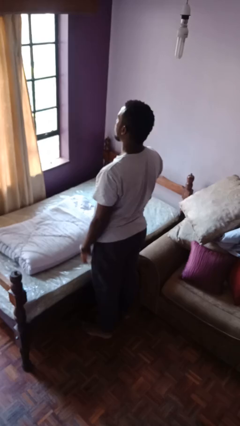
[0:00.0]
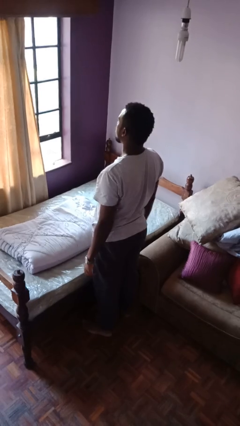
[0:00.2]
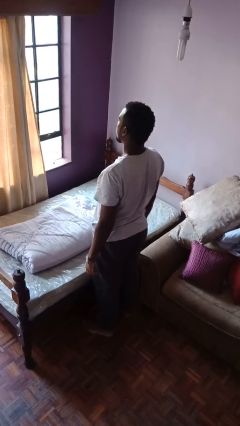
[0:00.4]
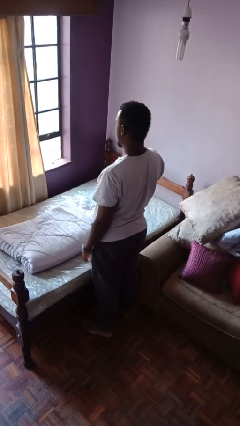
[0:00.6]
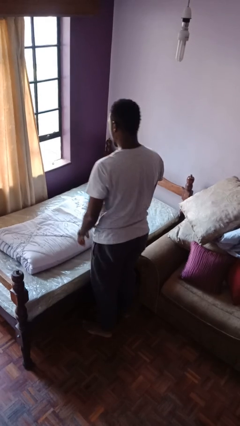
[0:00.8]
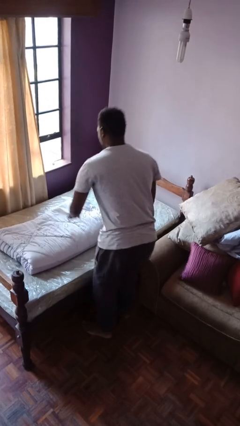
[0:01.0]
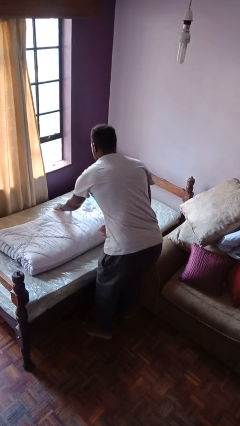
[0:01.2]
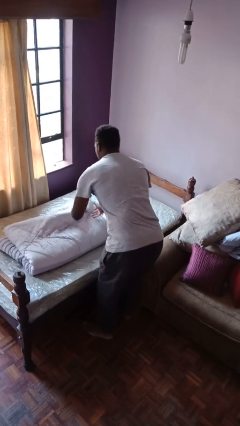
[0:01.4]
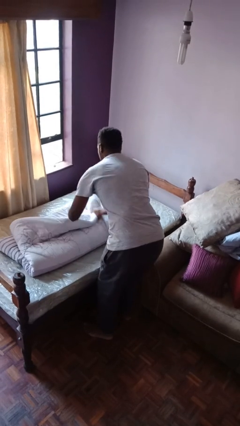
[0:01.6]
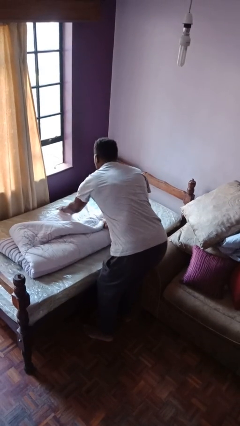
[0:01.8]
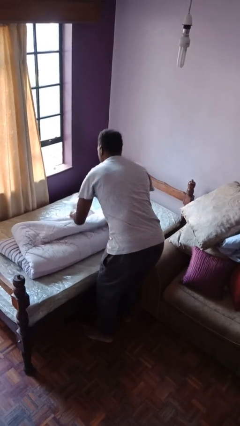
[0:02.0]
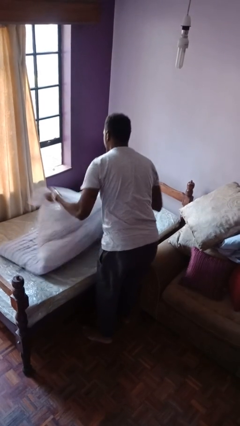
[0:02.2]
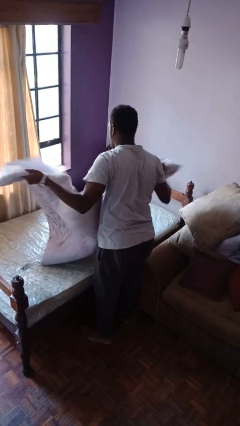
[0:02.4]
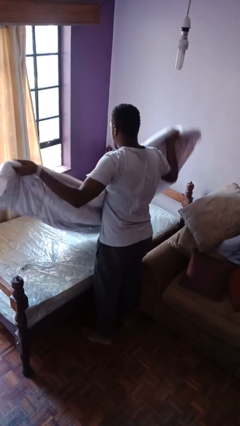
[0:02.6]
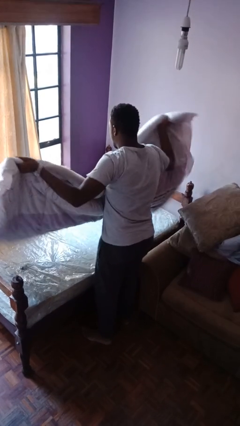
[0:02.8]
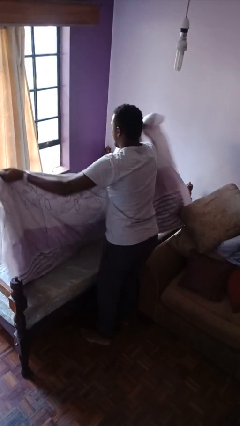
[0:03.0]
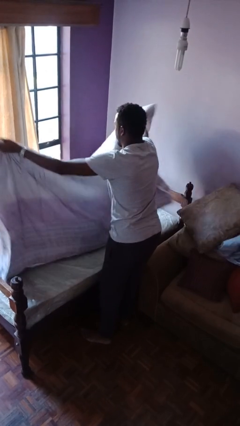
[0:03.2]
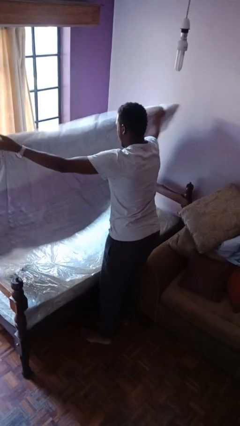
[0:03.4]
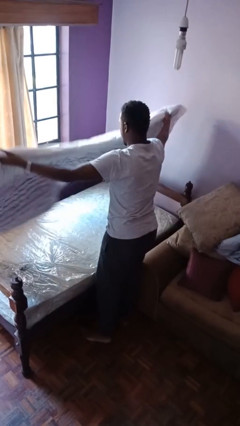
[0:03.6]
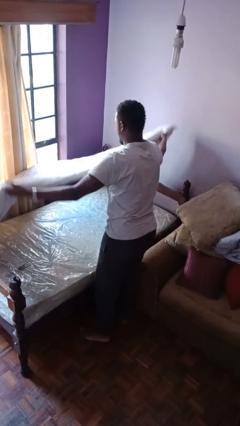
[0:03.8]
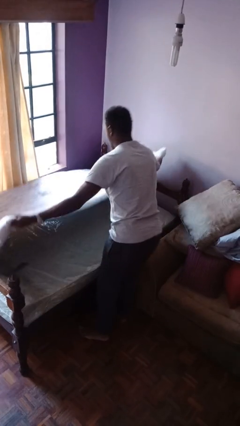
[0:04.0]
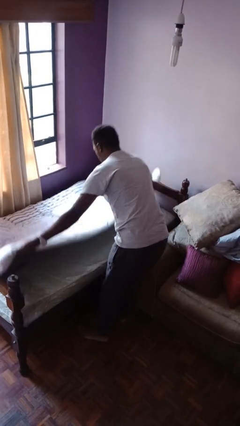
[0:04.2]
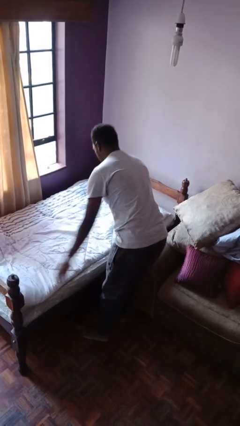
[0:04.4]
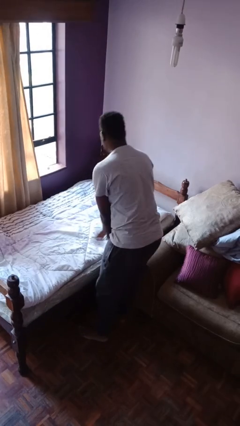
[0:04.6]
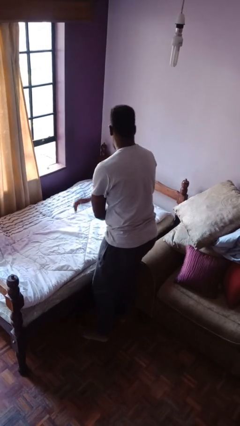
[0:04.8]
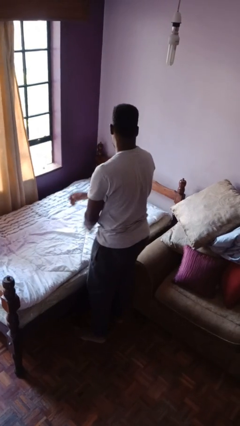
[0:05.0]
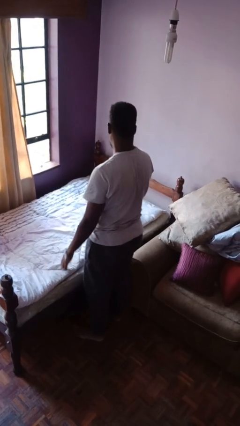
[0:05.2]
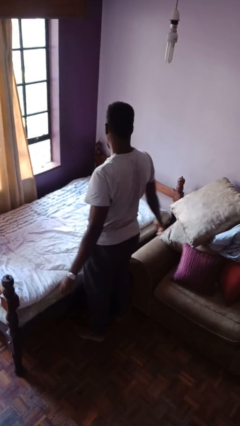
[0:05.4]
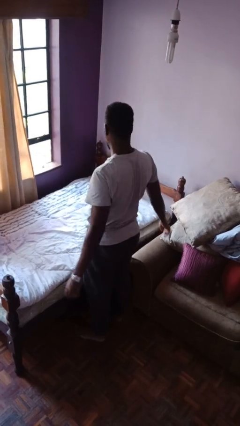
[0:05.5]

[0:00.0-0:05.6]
person unfolds blanket

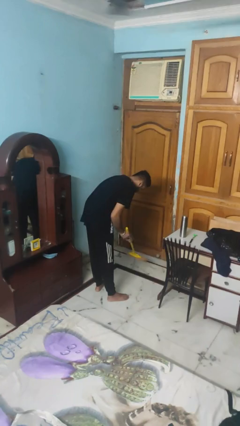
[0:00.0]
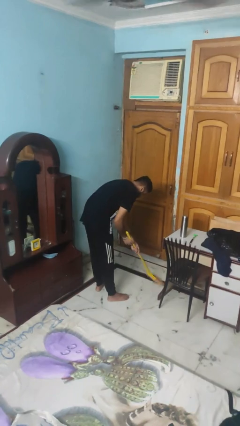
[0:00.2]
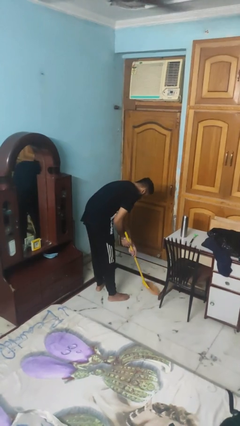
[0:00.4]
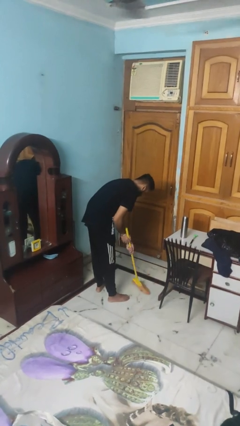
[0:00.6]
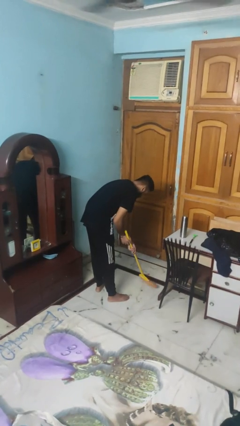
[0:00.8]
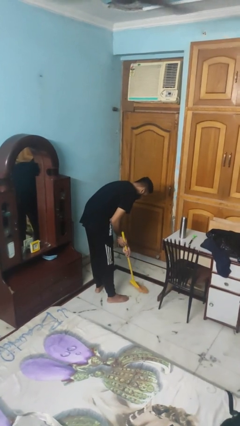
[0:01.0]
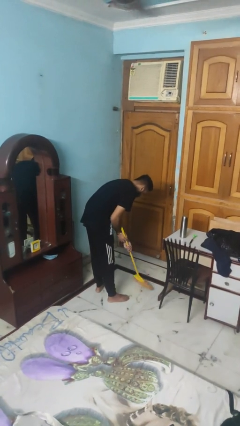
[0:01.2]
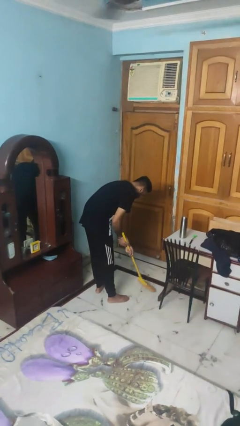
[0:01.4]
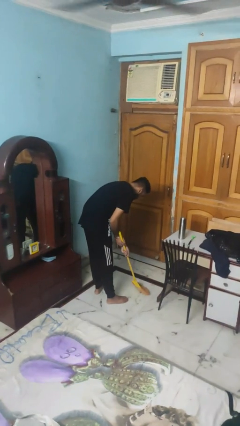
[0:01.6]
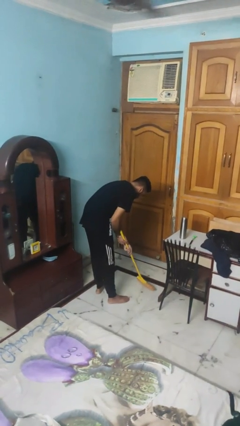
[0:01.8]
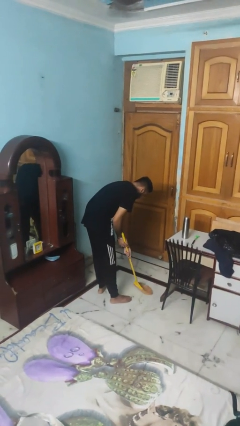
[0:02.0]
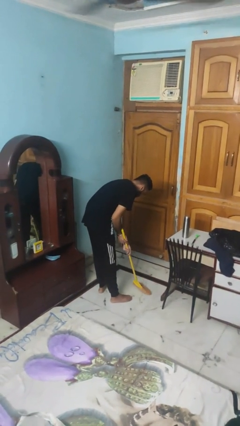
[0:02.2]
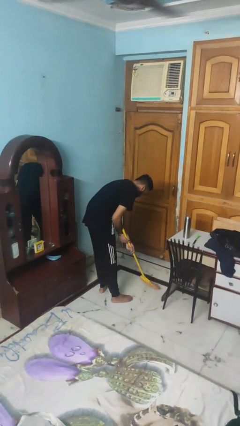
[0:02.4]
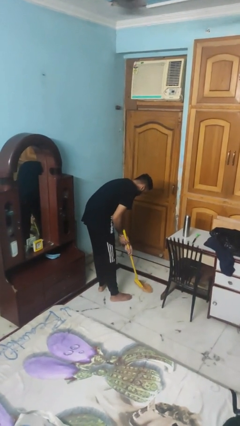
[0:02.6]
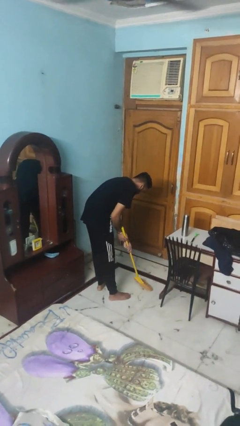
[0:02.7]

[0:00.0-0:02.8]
person sweeps floor

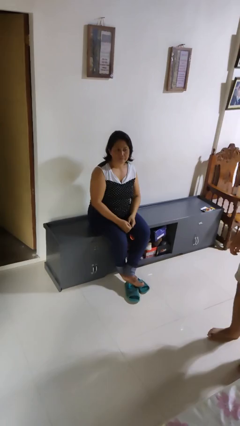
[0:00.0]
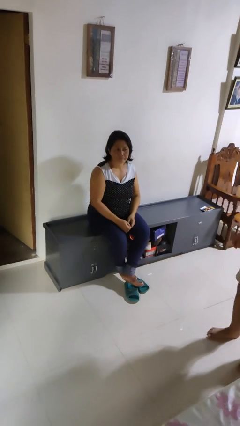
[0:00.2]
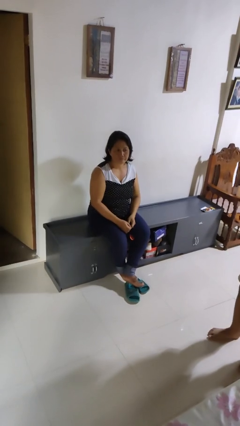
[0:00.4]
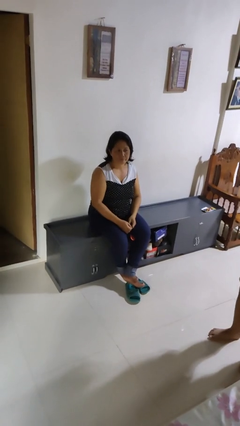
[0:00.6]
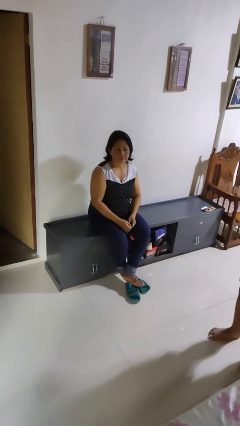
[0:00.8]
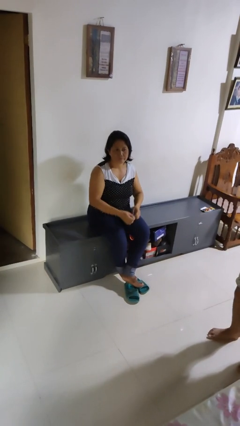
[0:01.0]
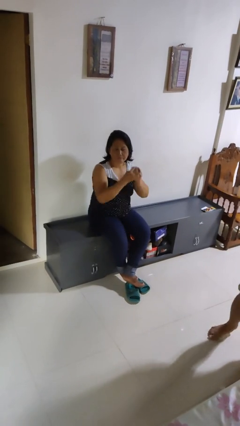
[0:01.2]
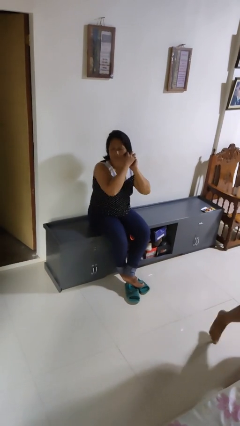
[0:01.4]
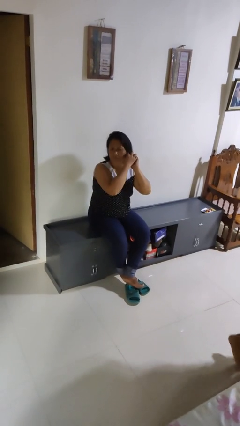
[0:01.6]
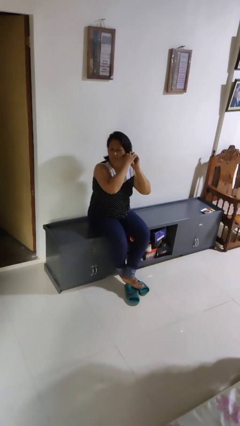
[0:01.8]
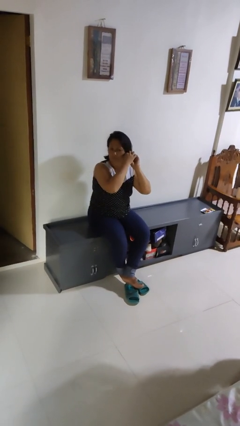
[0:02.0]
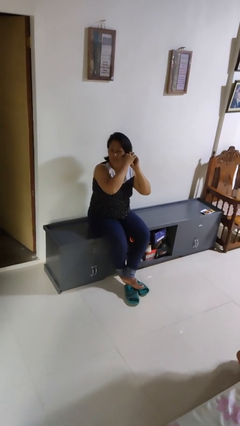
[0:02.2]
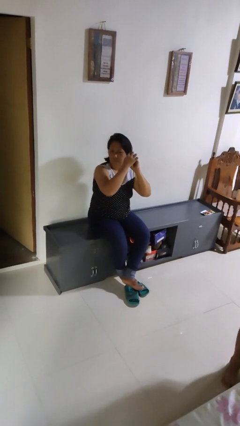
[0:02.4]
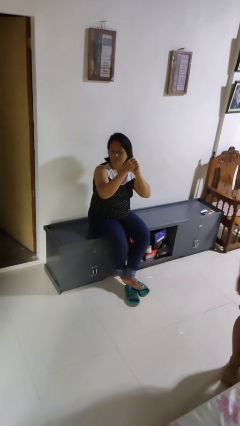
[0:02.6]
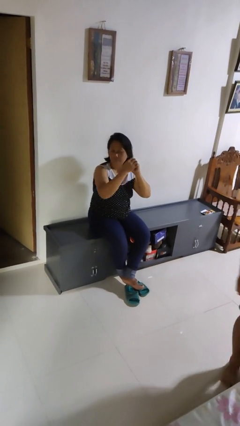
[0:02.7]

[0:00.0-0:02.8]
person takes off earrings

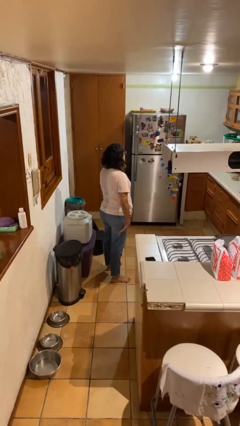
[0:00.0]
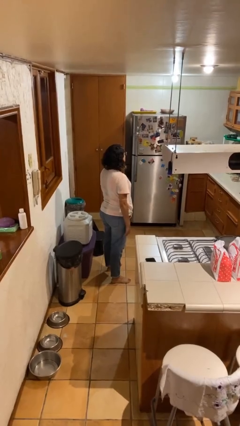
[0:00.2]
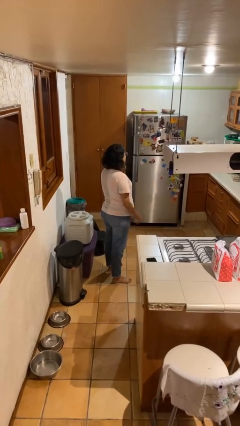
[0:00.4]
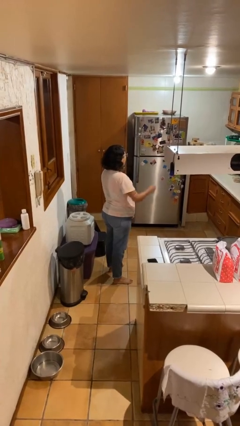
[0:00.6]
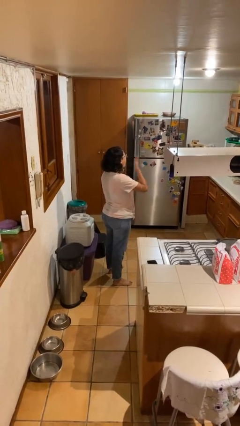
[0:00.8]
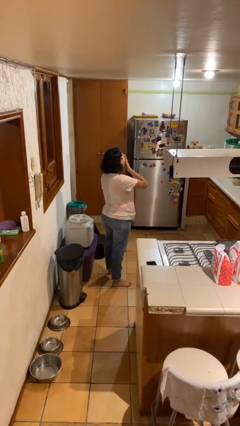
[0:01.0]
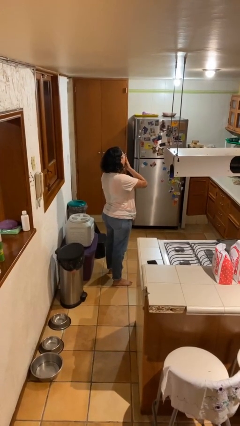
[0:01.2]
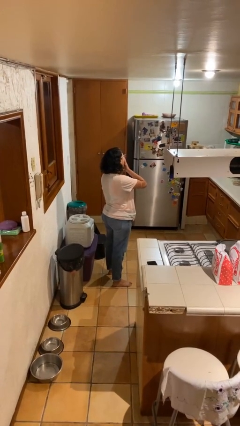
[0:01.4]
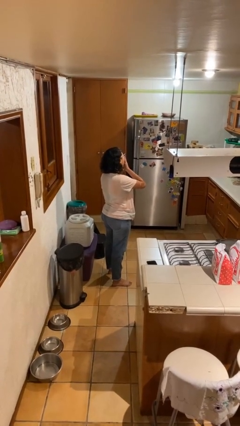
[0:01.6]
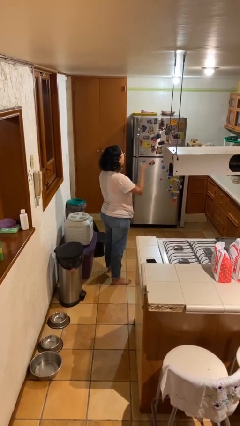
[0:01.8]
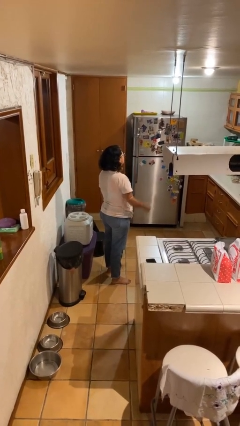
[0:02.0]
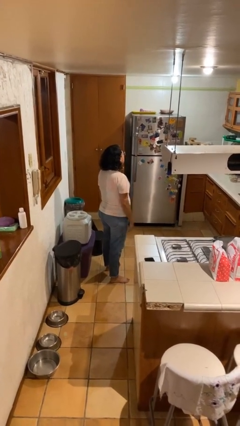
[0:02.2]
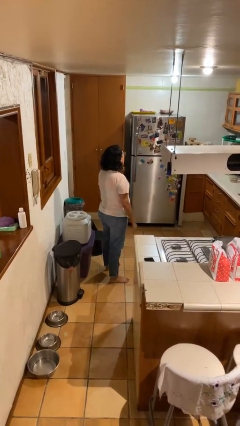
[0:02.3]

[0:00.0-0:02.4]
person yawns

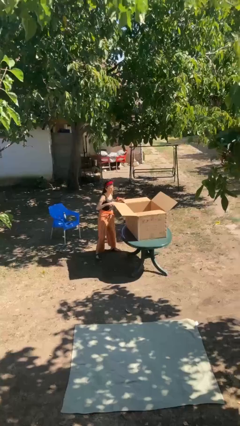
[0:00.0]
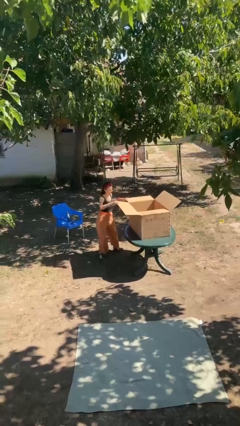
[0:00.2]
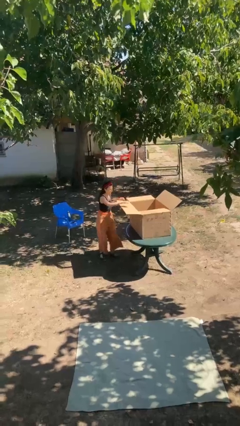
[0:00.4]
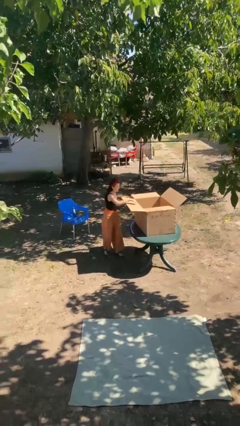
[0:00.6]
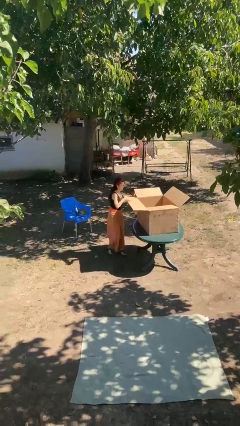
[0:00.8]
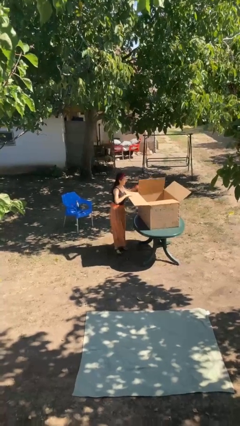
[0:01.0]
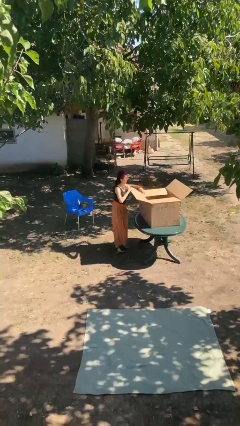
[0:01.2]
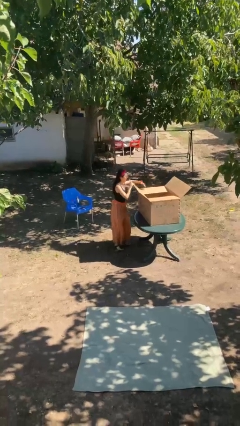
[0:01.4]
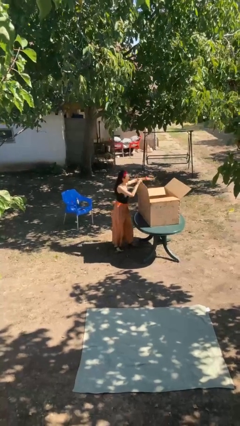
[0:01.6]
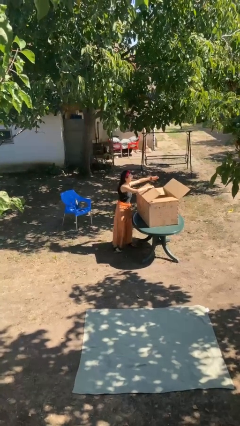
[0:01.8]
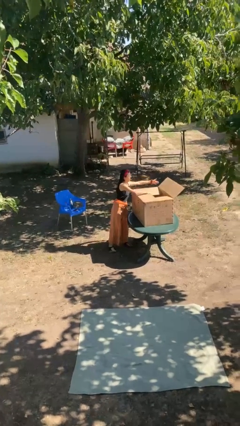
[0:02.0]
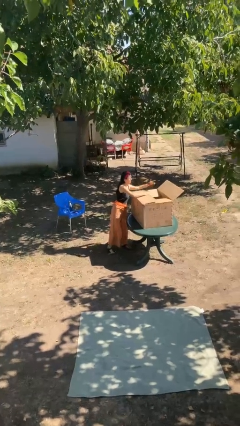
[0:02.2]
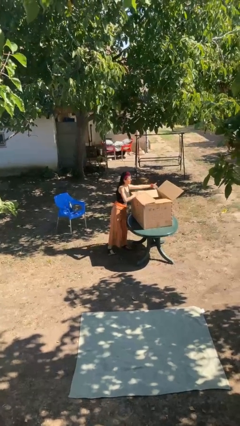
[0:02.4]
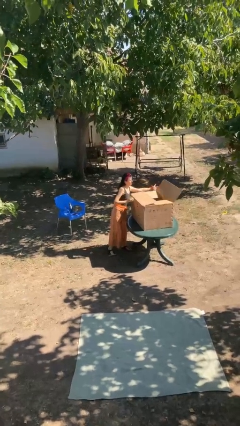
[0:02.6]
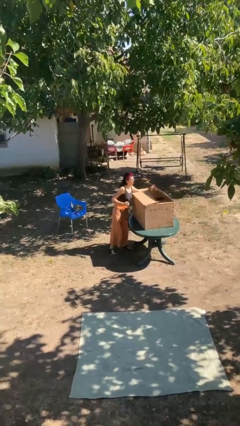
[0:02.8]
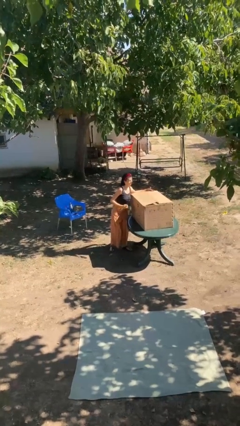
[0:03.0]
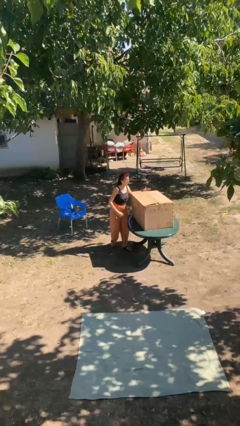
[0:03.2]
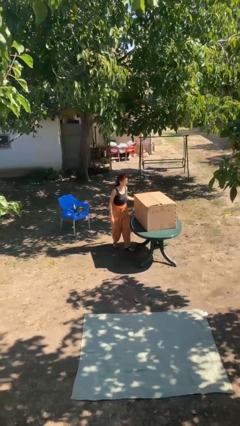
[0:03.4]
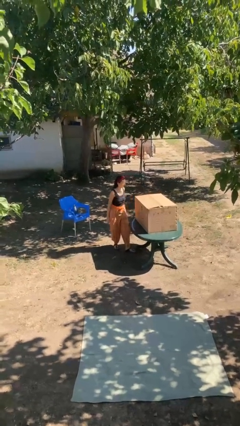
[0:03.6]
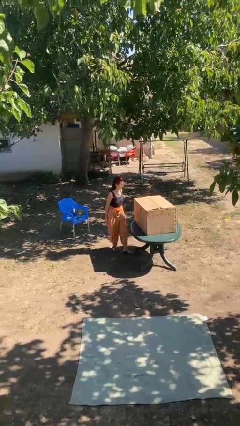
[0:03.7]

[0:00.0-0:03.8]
person closes box
